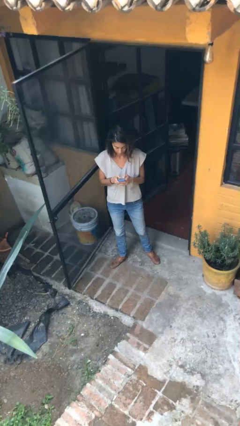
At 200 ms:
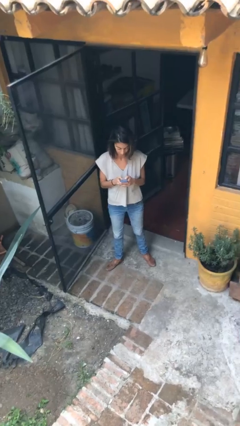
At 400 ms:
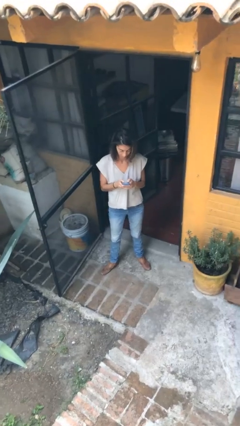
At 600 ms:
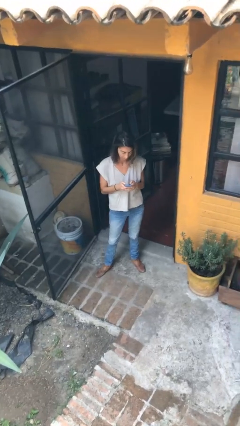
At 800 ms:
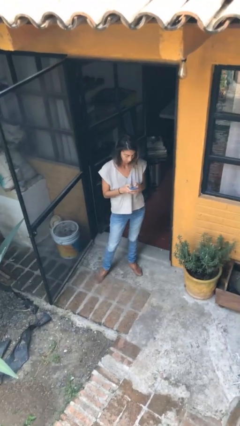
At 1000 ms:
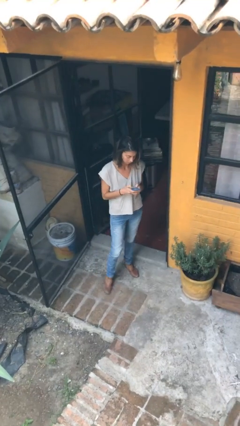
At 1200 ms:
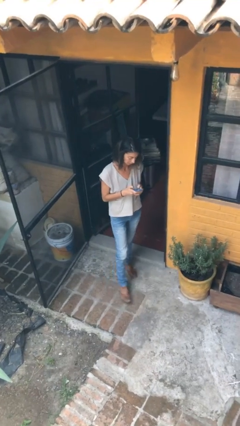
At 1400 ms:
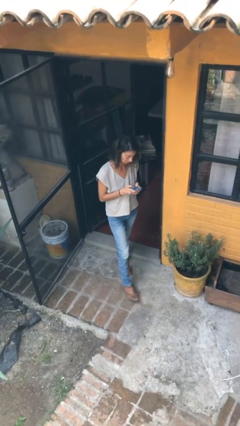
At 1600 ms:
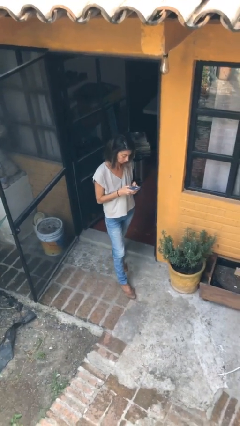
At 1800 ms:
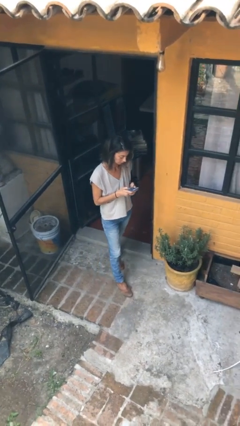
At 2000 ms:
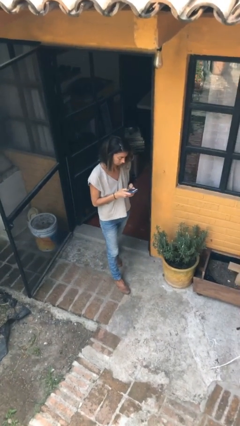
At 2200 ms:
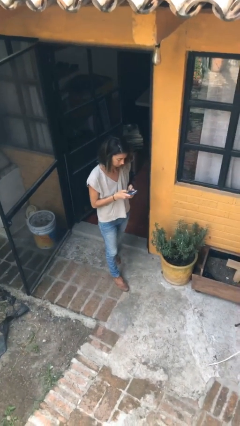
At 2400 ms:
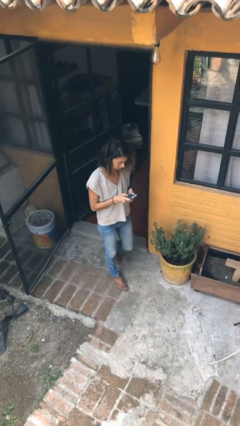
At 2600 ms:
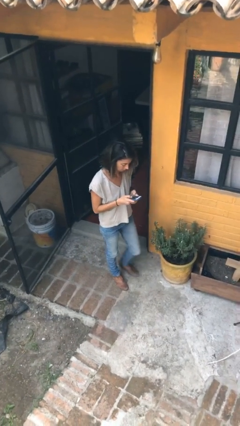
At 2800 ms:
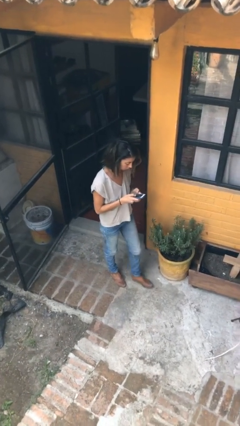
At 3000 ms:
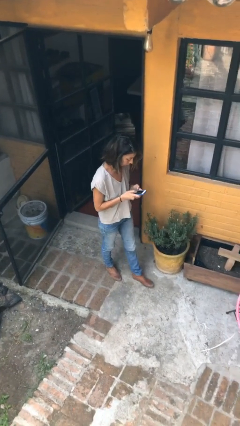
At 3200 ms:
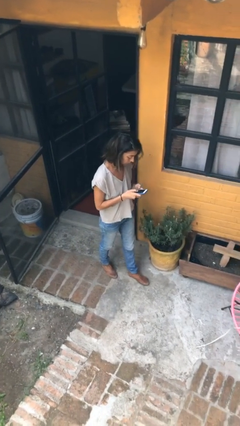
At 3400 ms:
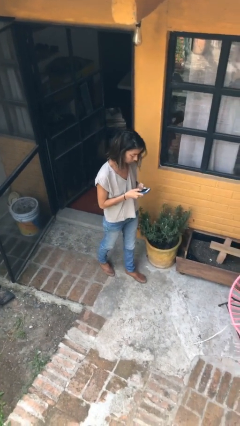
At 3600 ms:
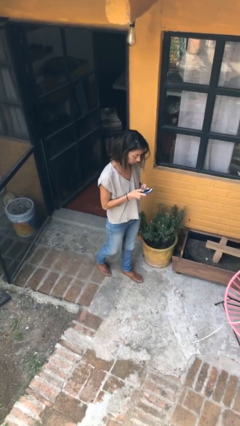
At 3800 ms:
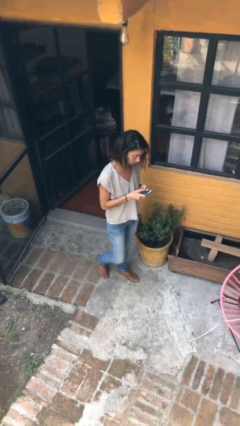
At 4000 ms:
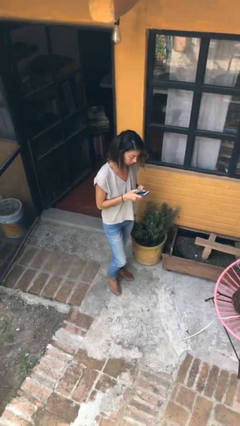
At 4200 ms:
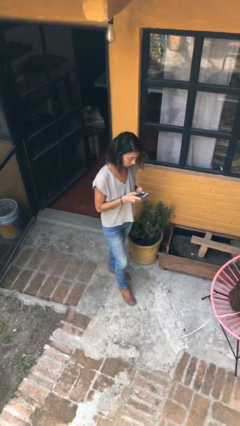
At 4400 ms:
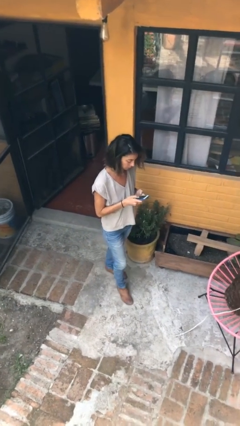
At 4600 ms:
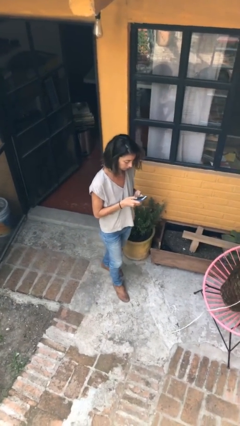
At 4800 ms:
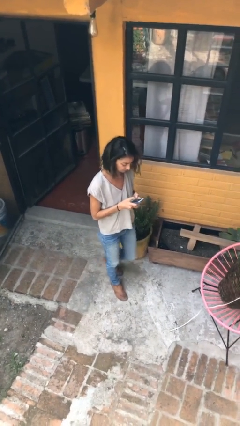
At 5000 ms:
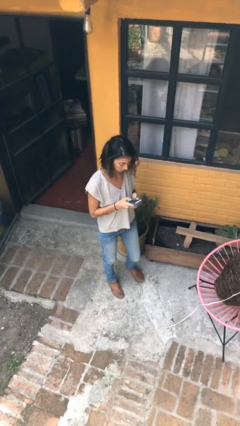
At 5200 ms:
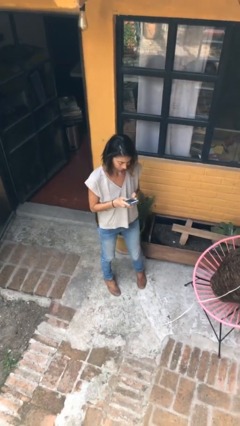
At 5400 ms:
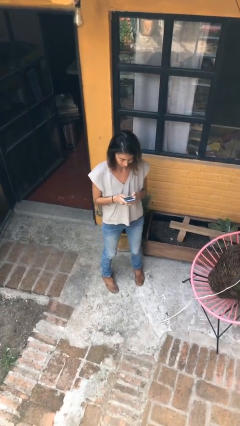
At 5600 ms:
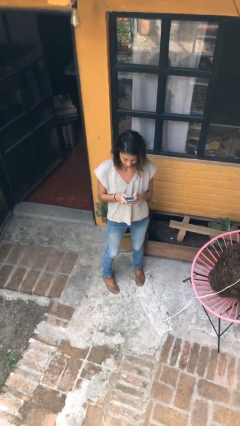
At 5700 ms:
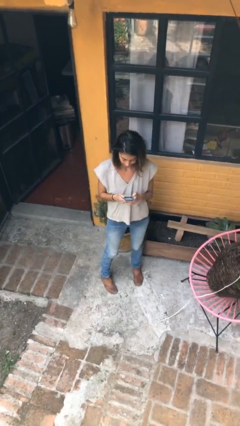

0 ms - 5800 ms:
person texts on phone

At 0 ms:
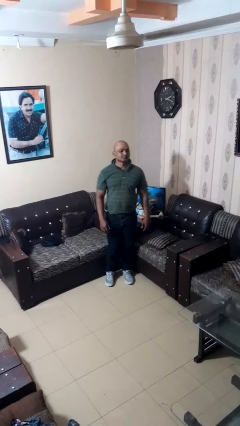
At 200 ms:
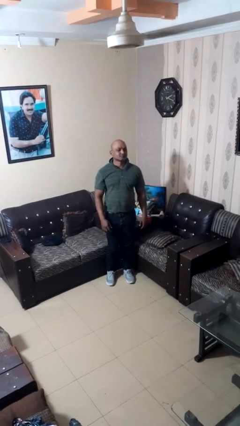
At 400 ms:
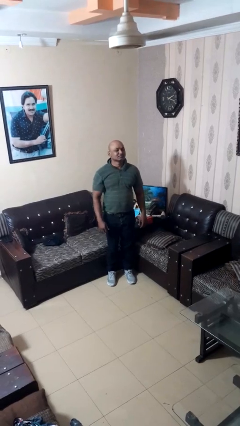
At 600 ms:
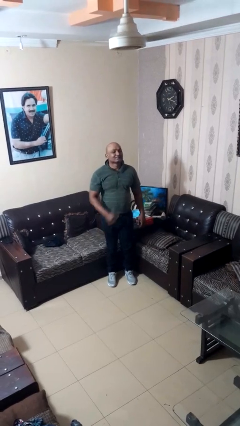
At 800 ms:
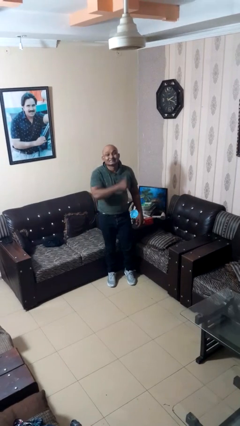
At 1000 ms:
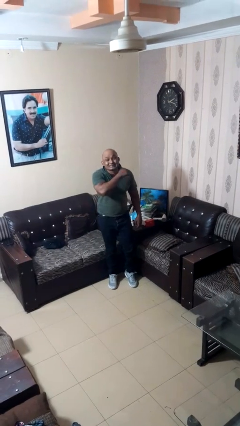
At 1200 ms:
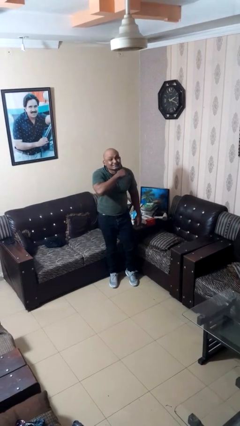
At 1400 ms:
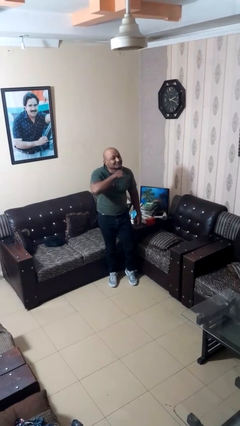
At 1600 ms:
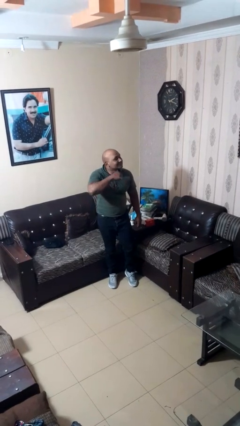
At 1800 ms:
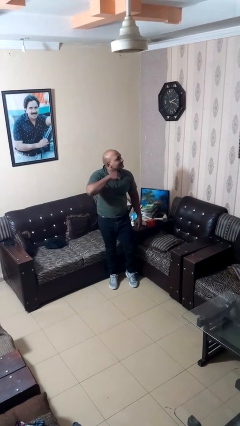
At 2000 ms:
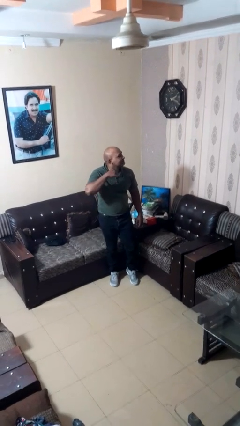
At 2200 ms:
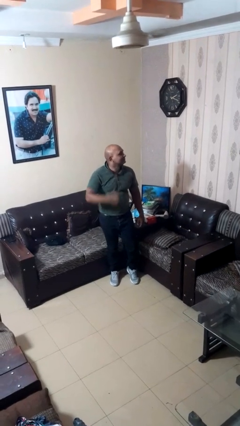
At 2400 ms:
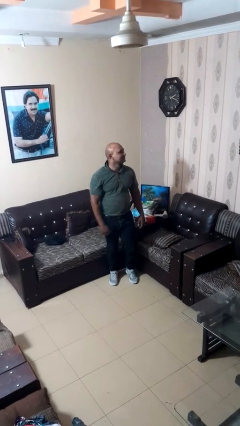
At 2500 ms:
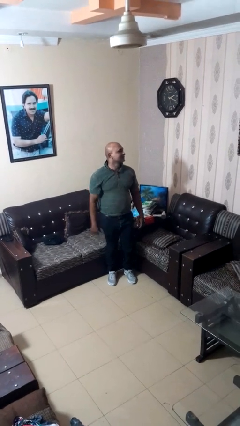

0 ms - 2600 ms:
person gestures cut

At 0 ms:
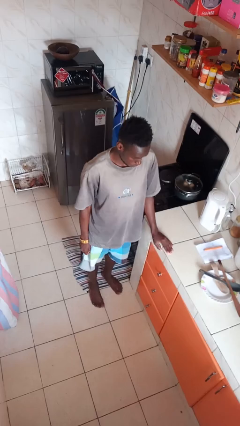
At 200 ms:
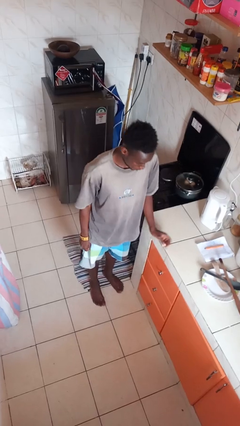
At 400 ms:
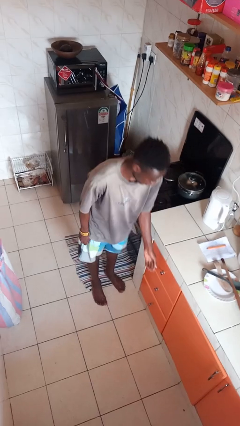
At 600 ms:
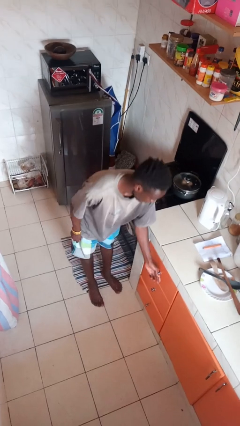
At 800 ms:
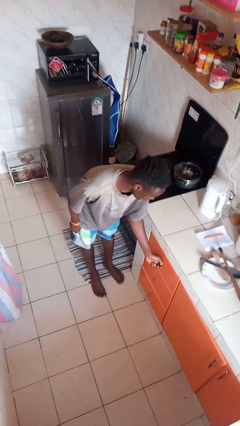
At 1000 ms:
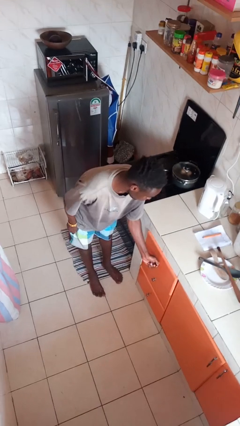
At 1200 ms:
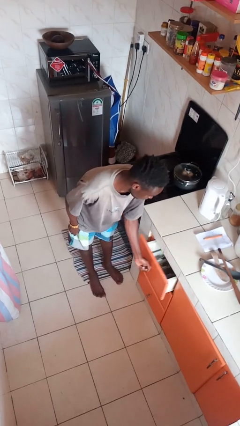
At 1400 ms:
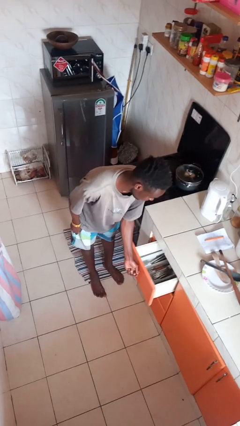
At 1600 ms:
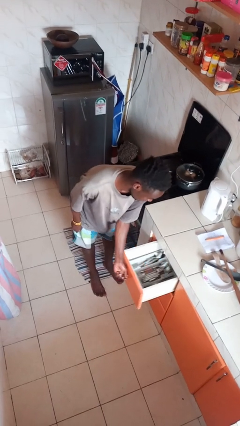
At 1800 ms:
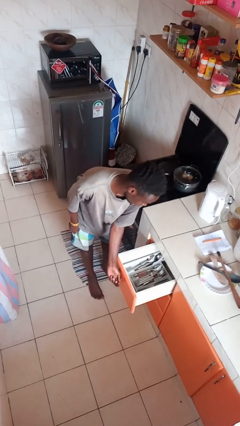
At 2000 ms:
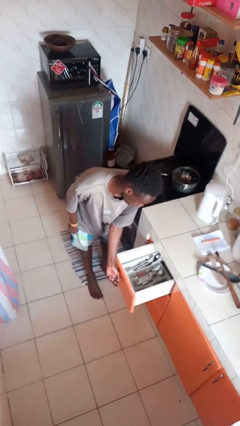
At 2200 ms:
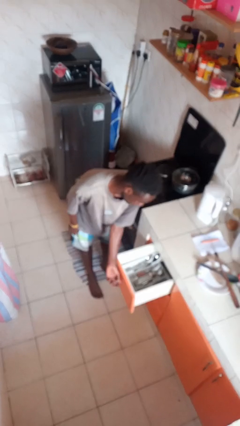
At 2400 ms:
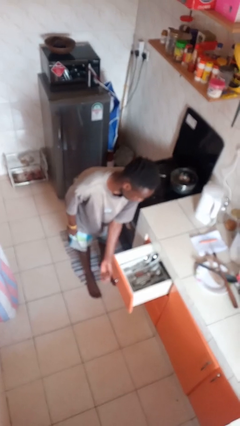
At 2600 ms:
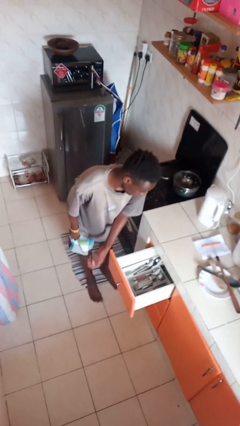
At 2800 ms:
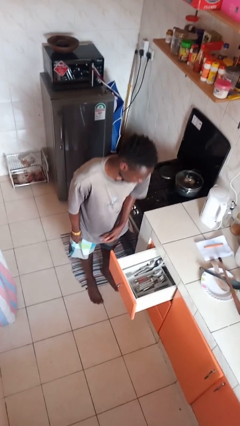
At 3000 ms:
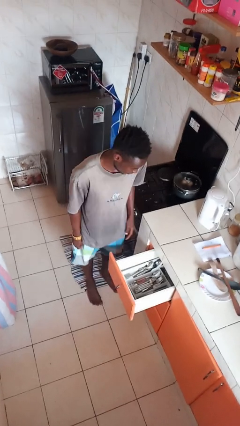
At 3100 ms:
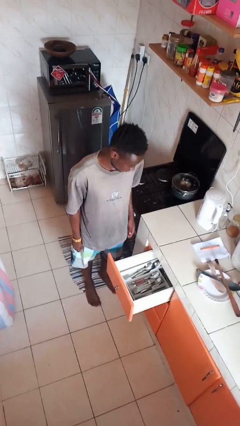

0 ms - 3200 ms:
person opens kitchen drawer

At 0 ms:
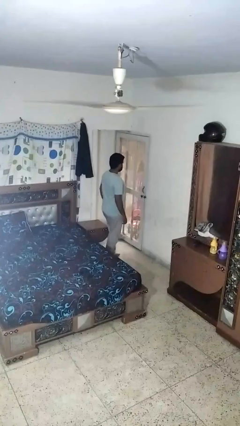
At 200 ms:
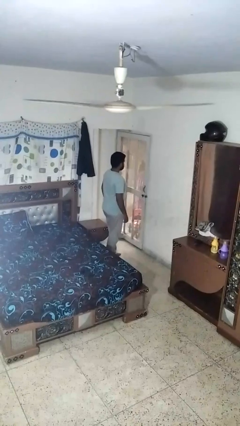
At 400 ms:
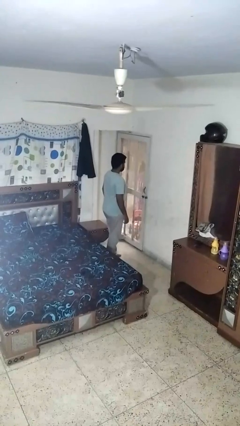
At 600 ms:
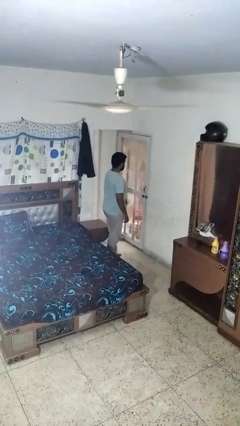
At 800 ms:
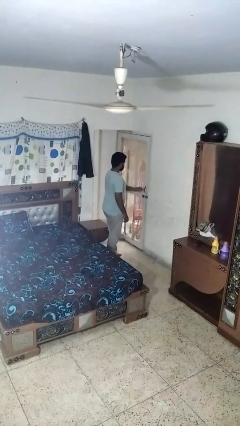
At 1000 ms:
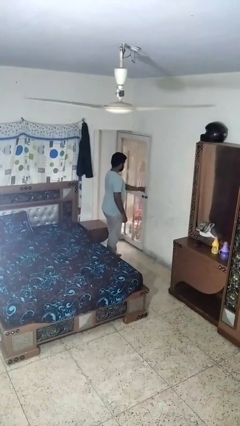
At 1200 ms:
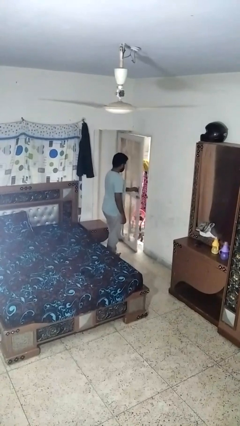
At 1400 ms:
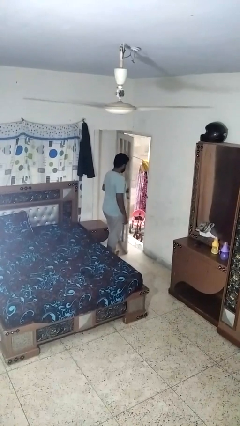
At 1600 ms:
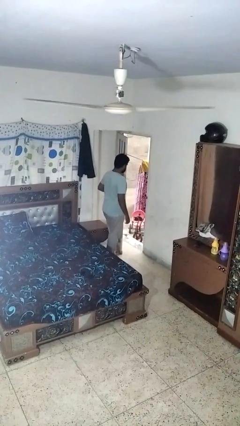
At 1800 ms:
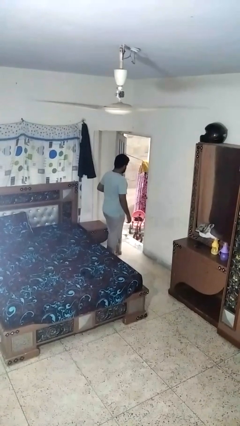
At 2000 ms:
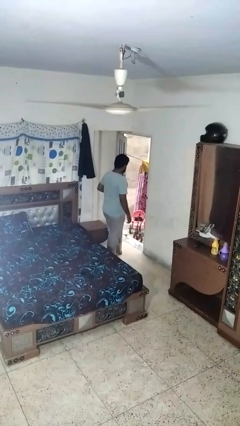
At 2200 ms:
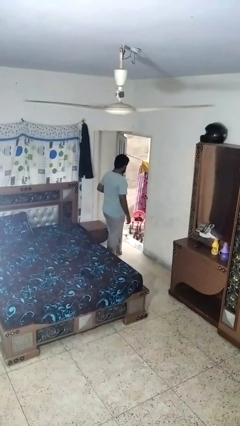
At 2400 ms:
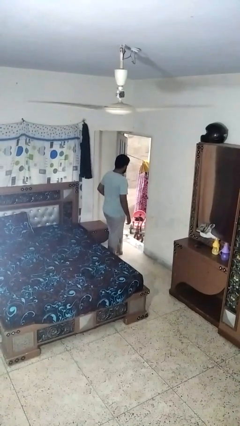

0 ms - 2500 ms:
person opens facility door

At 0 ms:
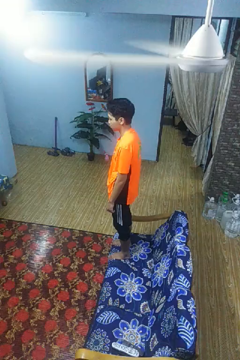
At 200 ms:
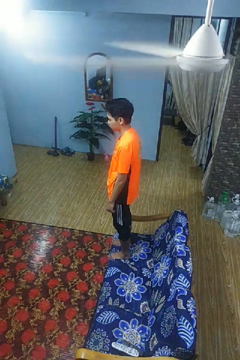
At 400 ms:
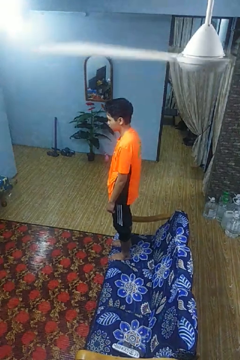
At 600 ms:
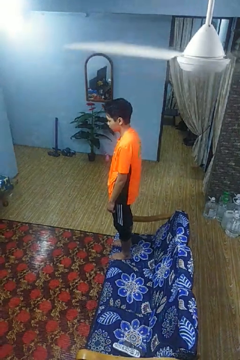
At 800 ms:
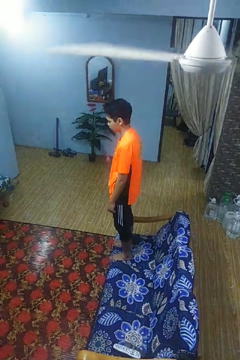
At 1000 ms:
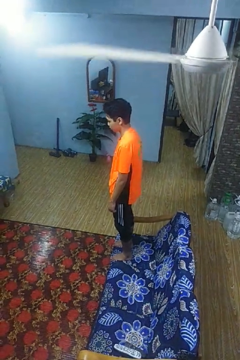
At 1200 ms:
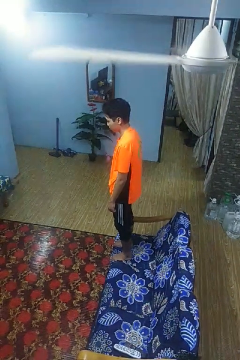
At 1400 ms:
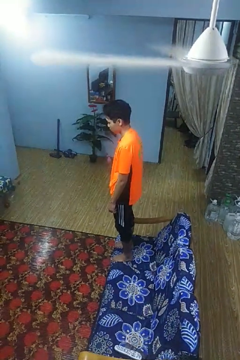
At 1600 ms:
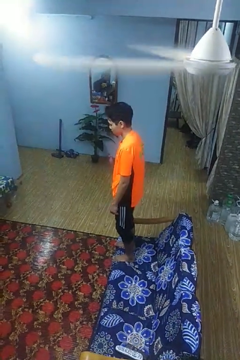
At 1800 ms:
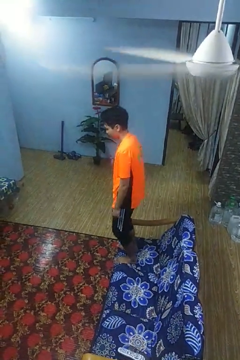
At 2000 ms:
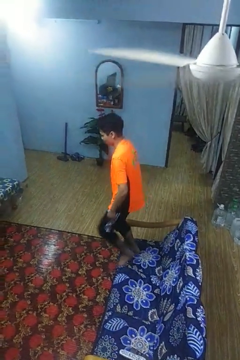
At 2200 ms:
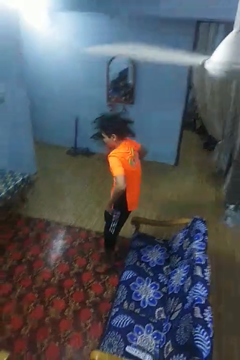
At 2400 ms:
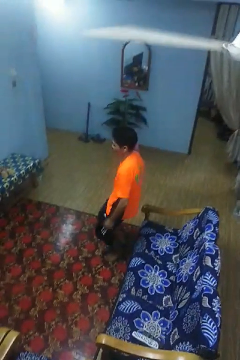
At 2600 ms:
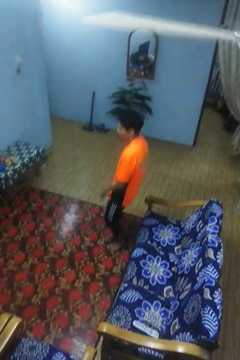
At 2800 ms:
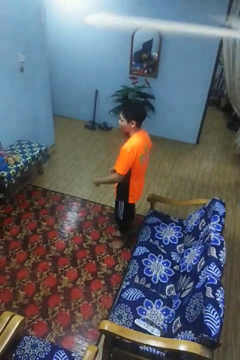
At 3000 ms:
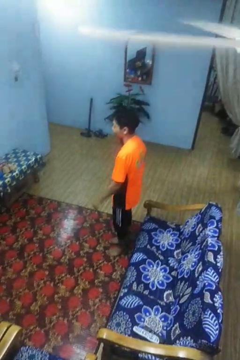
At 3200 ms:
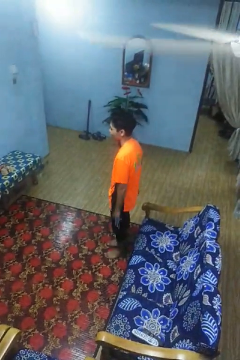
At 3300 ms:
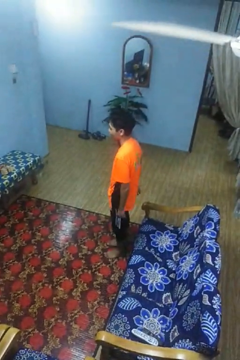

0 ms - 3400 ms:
person jumps on couch

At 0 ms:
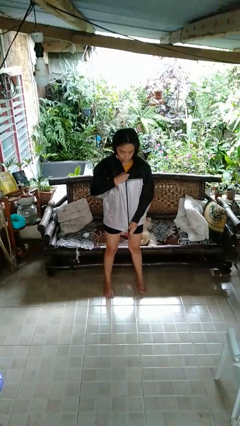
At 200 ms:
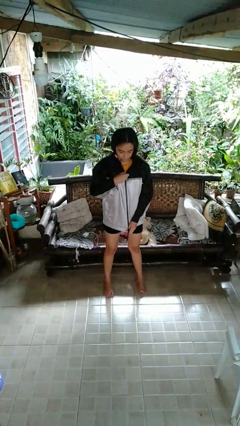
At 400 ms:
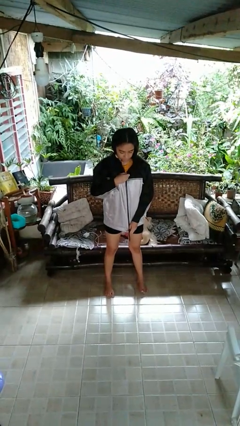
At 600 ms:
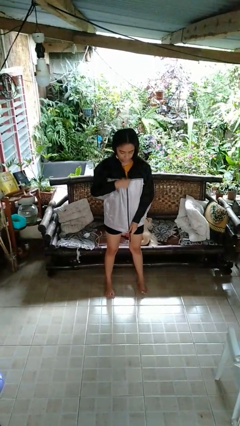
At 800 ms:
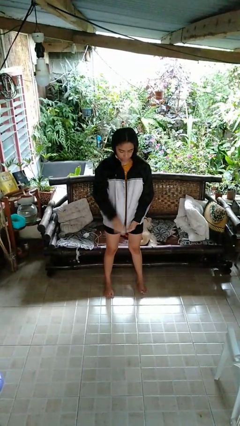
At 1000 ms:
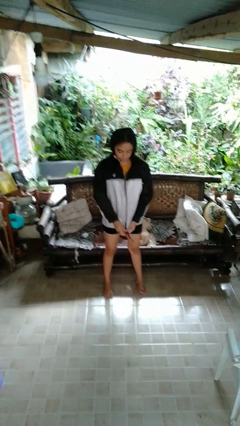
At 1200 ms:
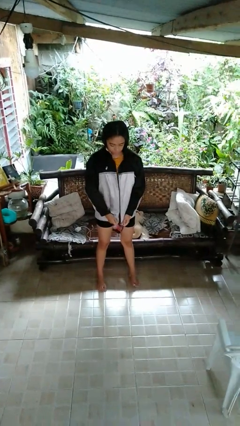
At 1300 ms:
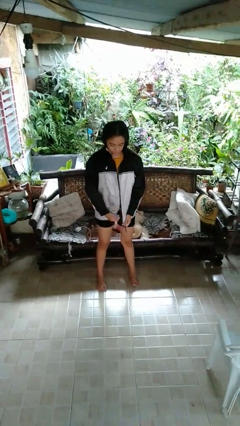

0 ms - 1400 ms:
person unzips jacket
